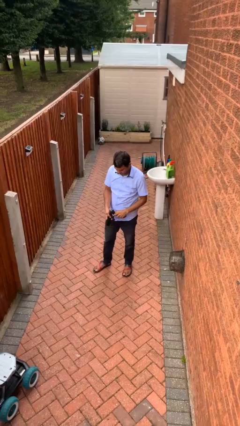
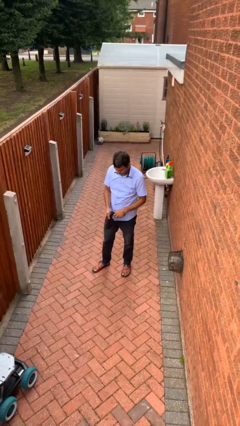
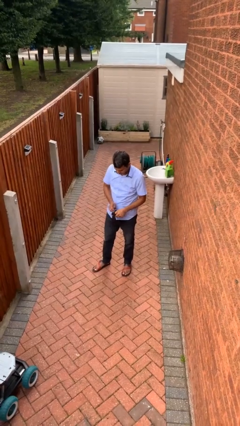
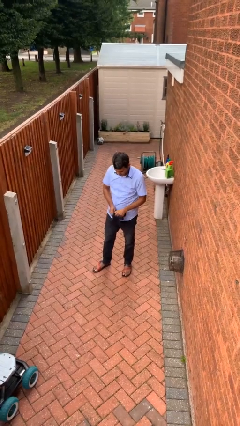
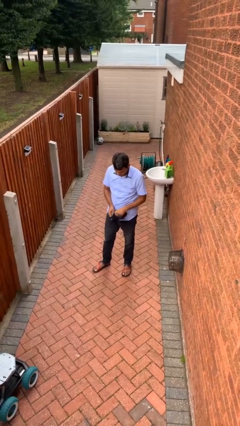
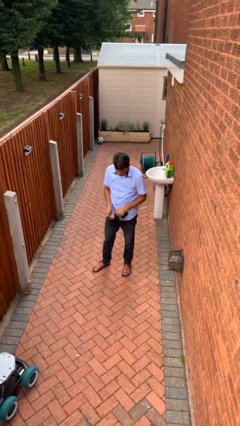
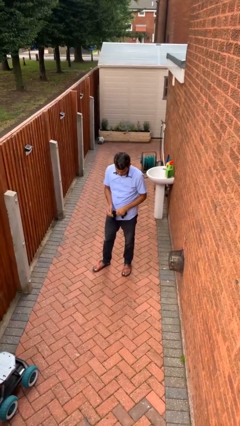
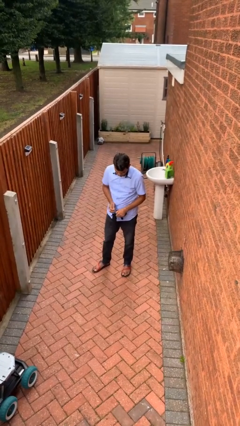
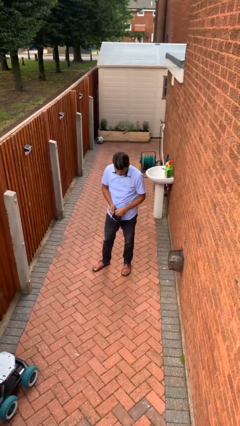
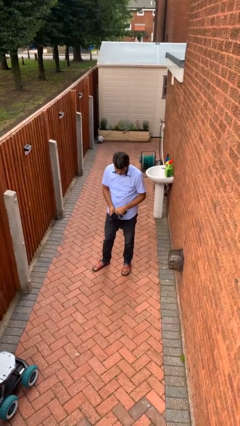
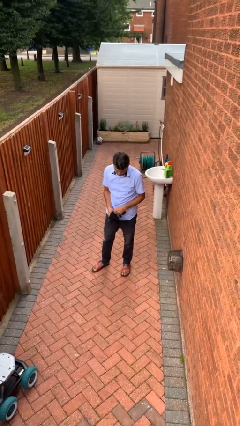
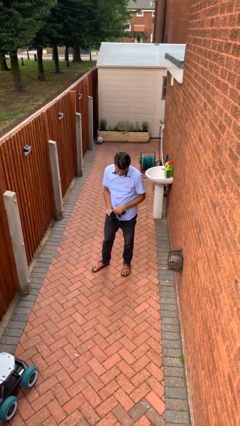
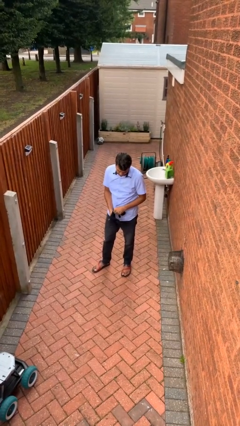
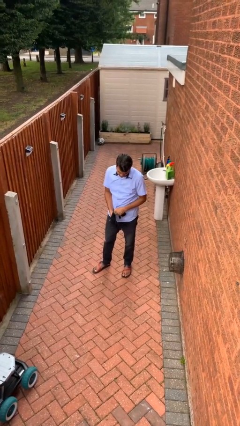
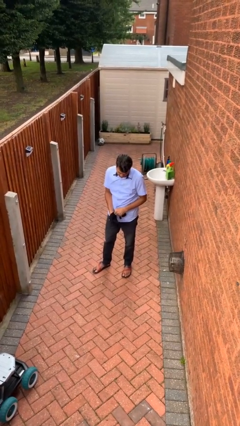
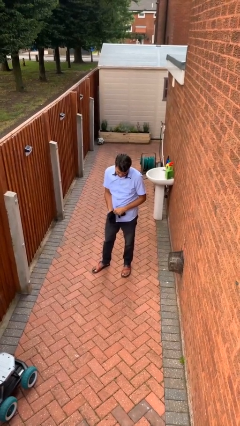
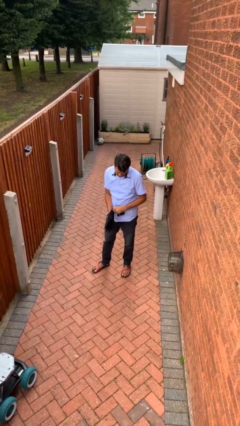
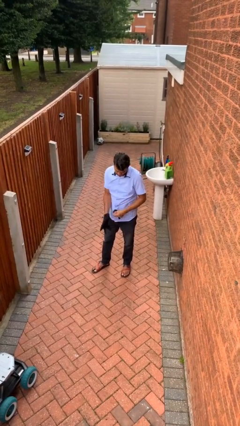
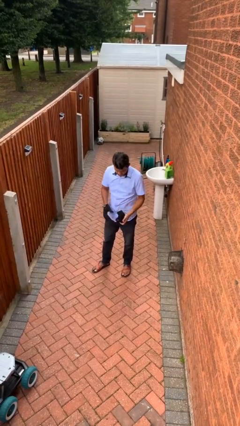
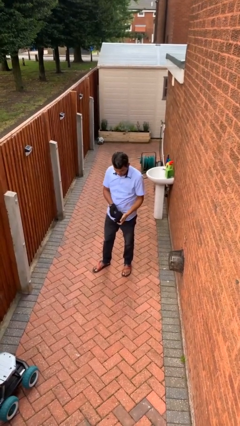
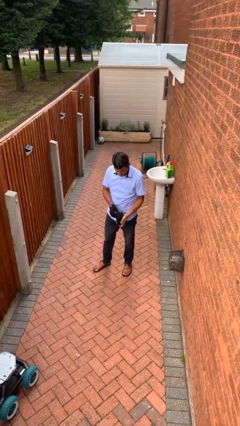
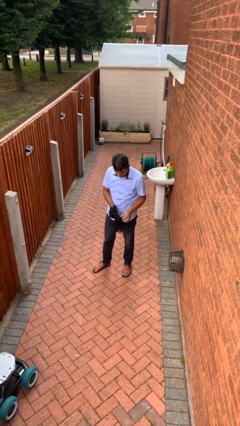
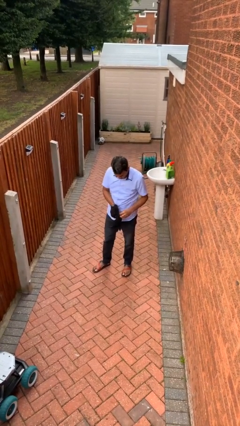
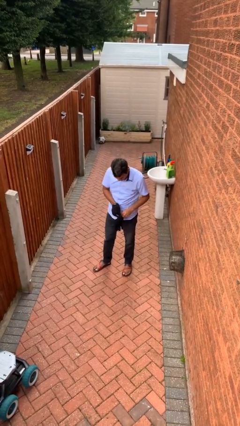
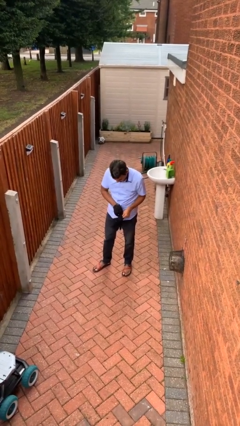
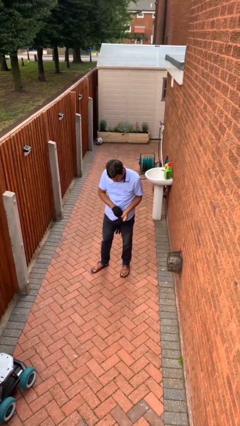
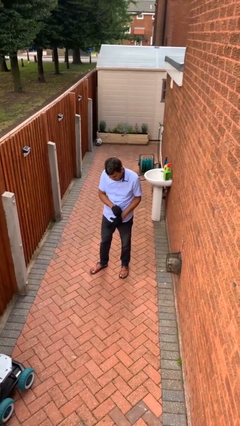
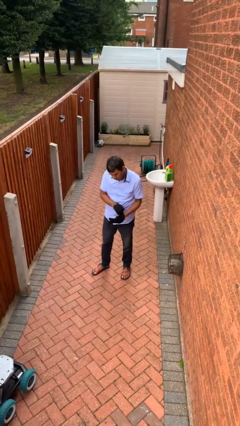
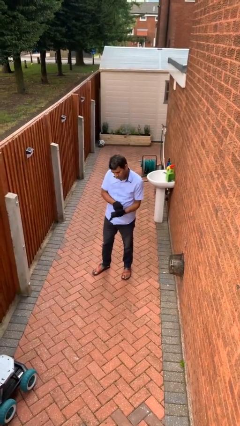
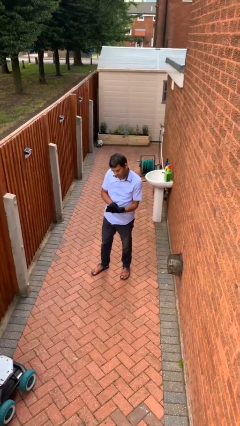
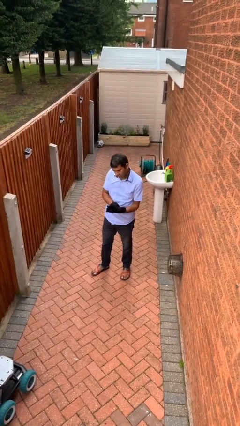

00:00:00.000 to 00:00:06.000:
person puts on gloves

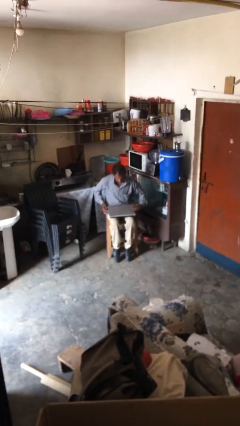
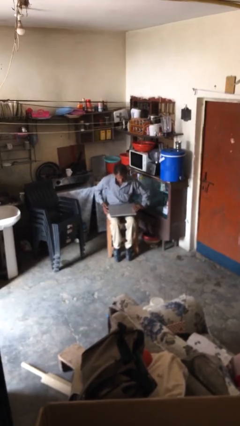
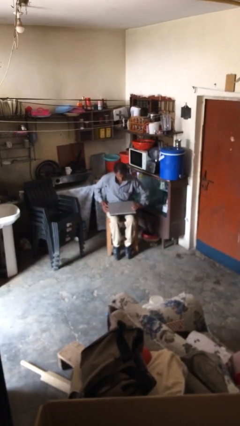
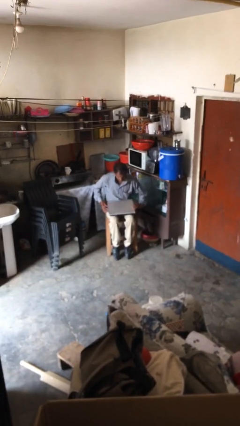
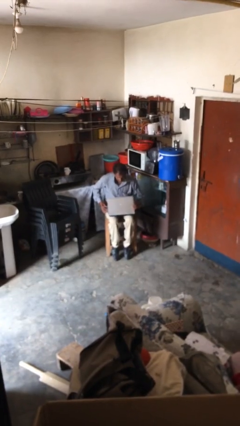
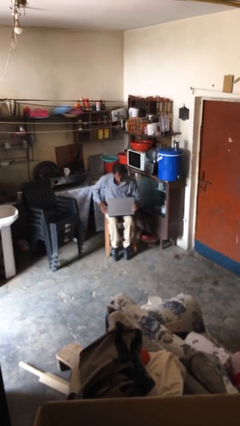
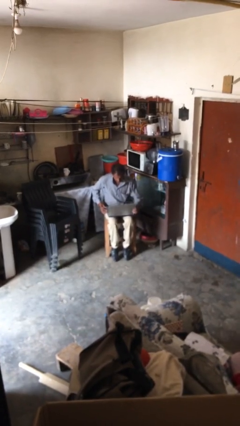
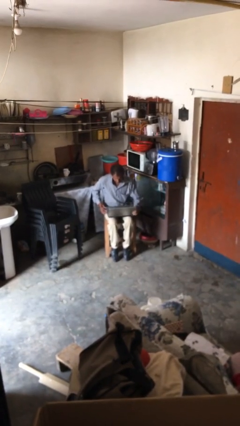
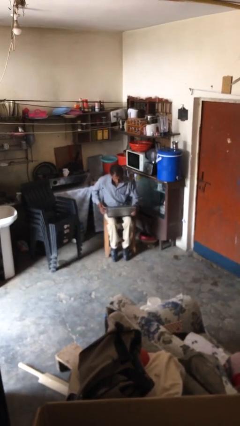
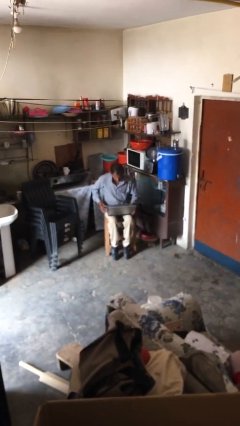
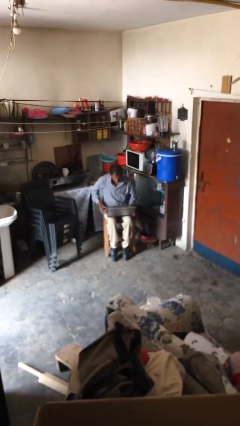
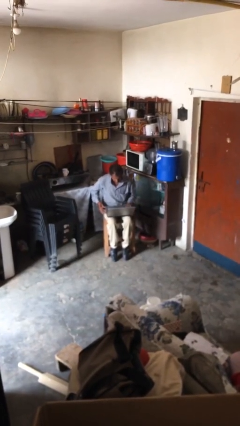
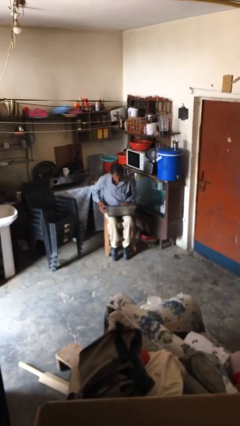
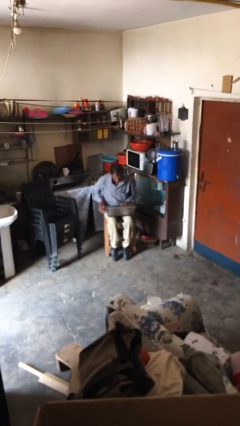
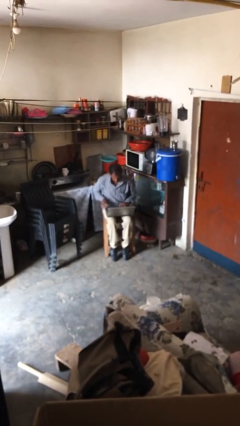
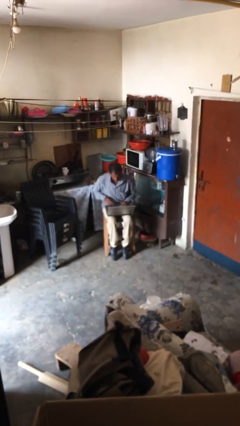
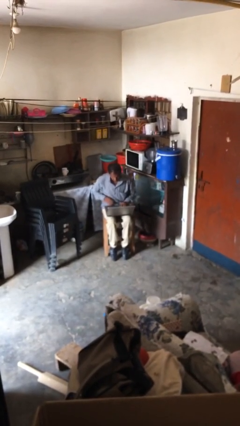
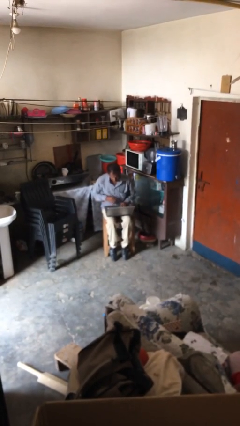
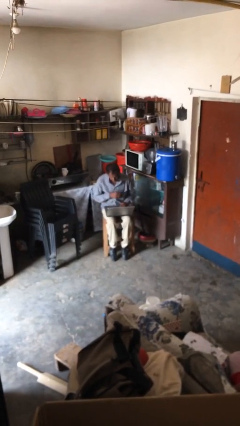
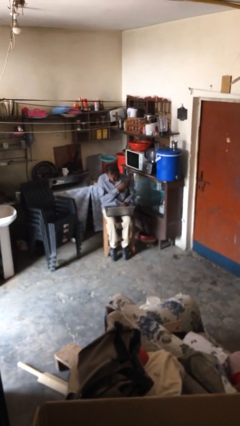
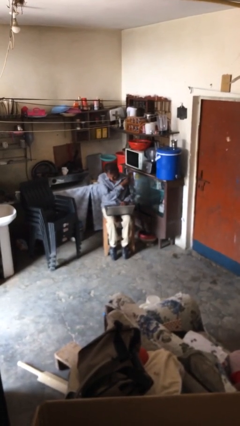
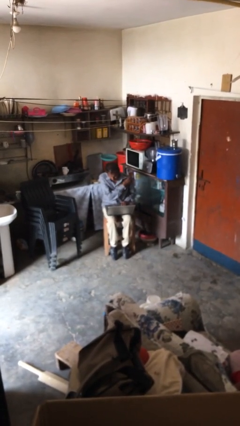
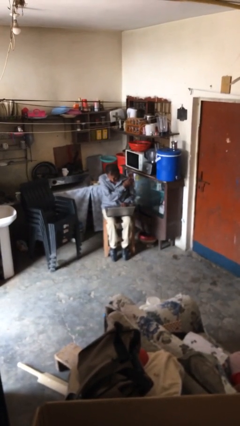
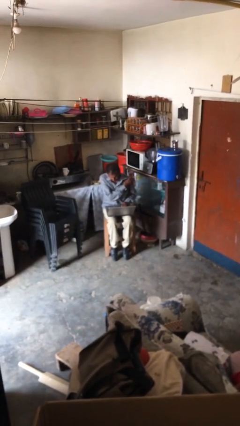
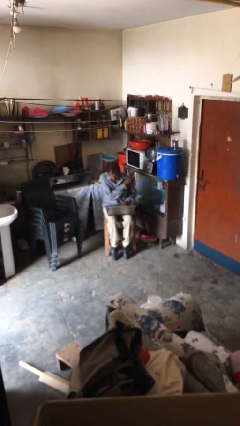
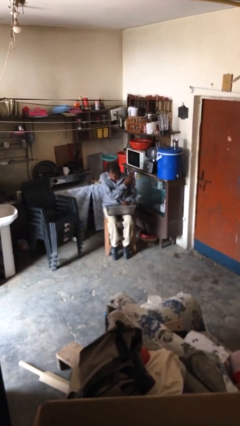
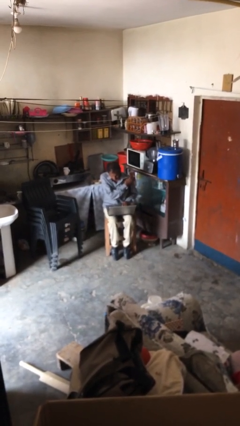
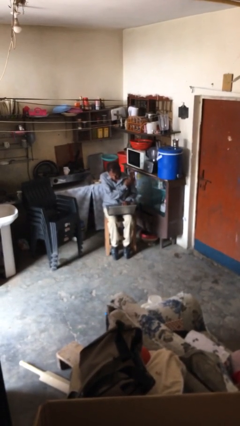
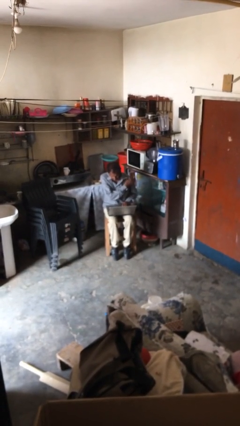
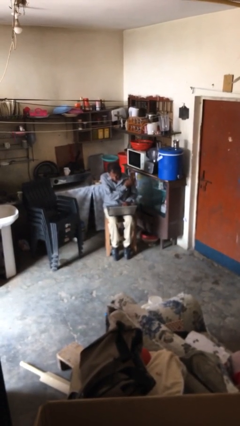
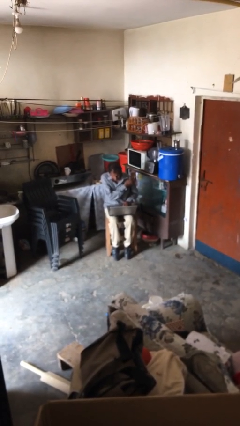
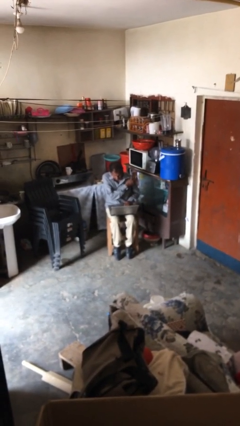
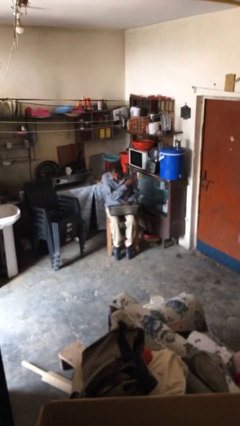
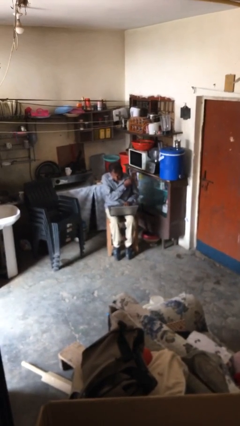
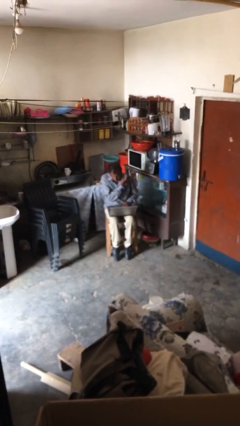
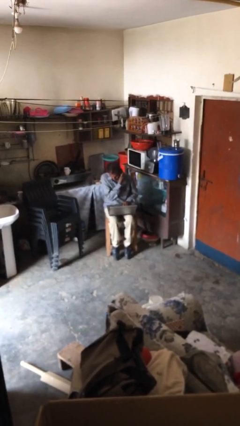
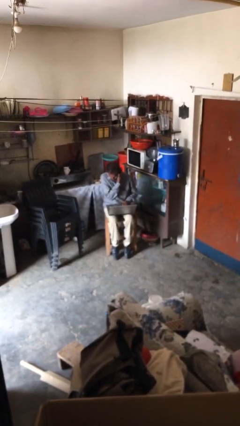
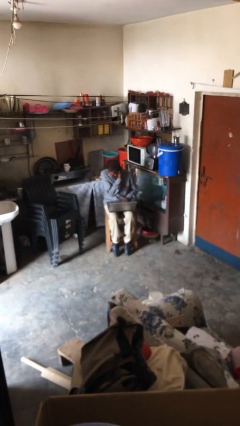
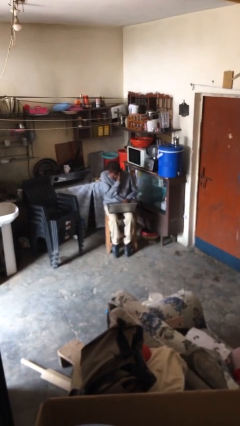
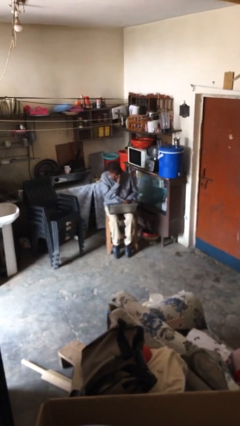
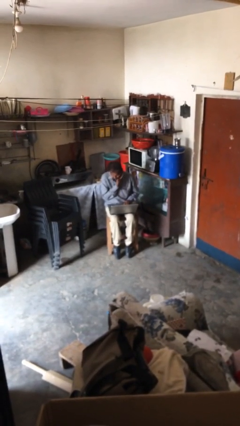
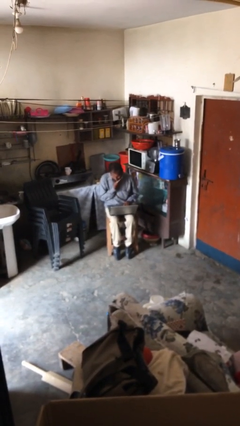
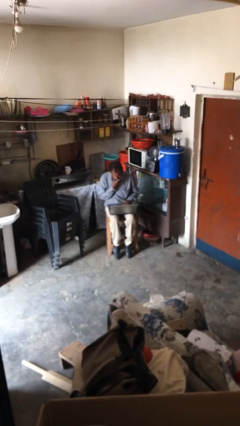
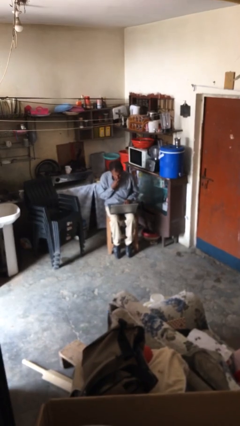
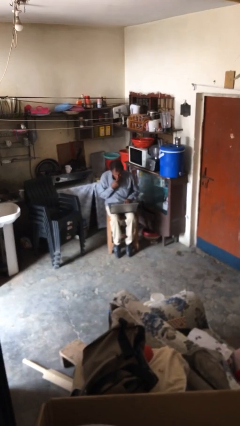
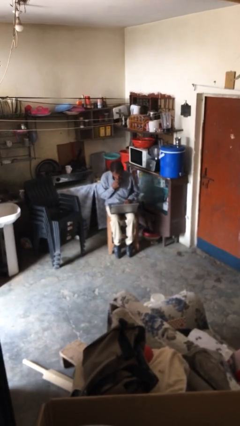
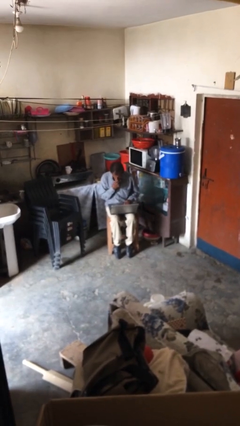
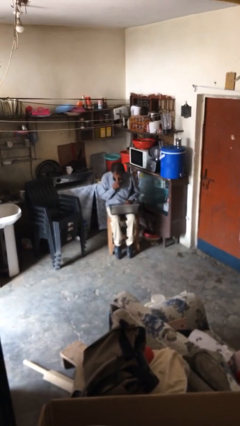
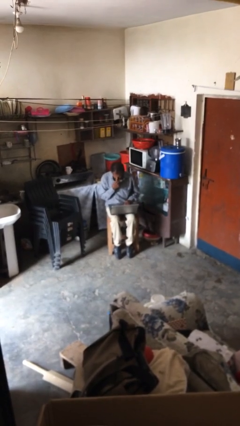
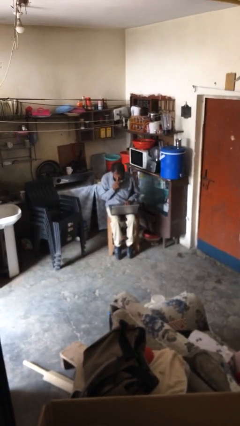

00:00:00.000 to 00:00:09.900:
person interacts with laptop

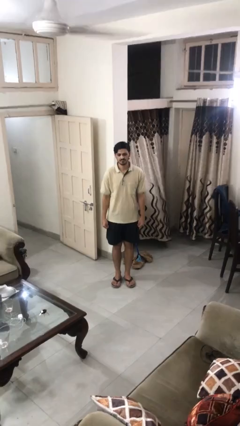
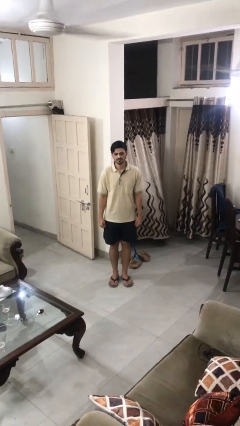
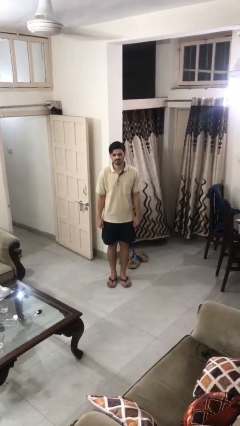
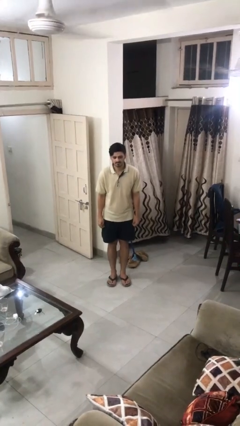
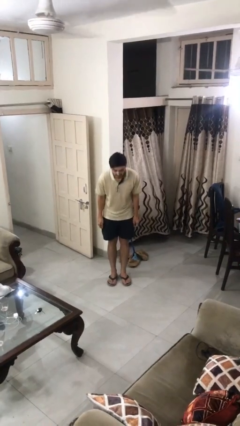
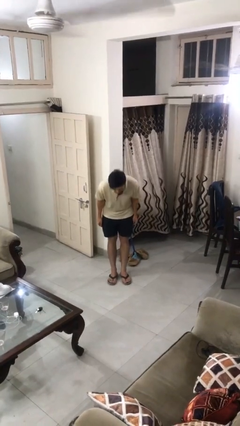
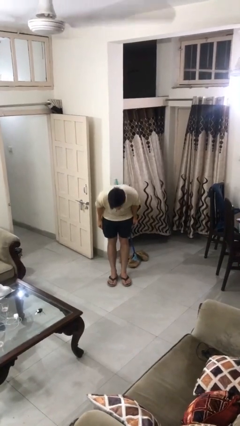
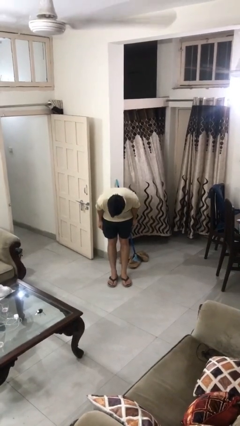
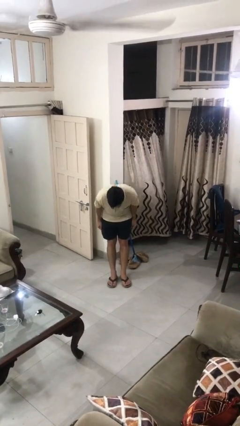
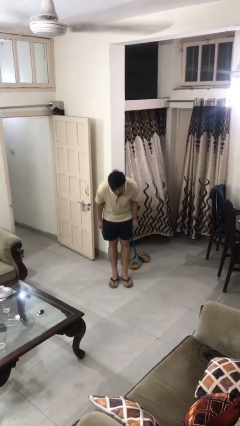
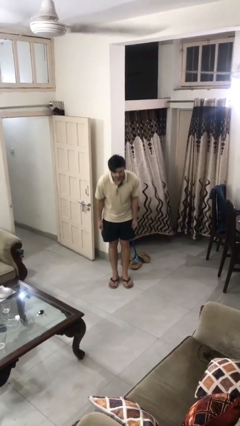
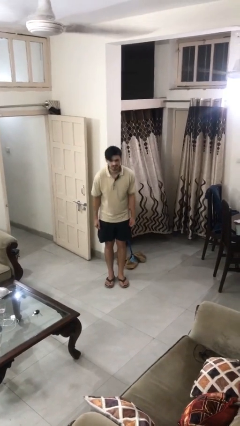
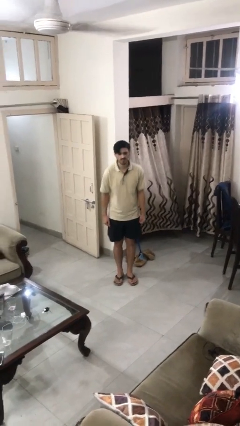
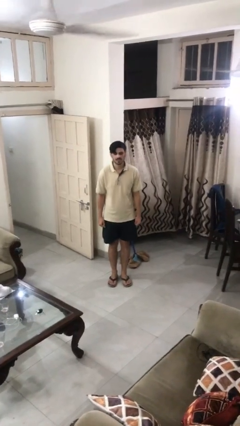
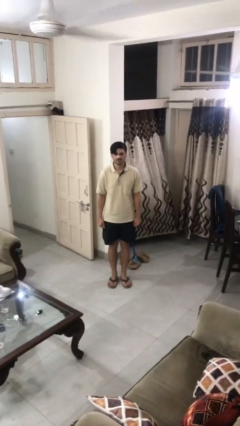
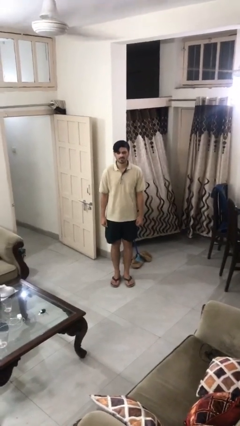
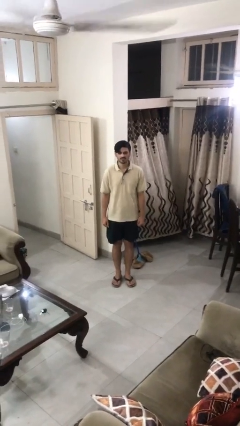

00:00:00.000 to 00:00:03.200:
person bows
